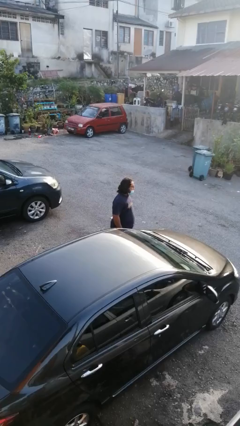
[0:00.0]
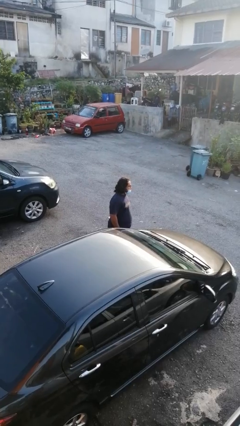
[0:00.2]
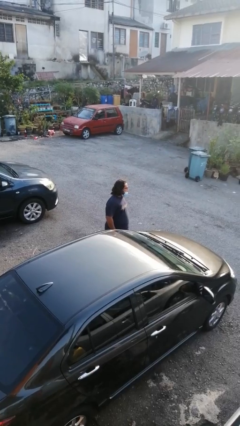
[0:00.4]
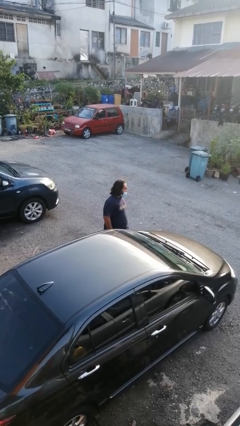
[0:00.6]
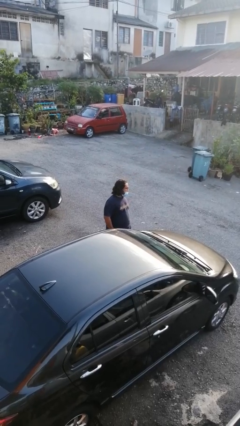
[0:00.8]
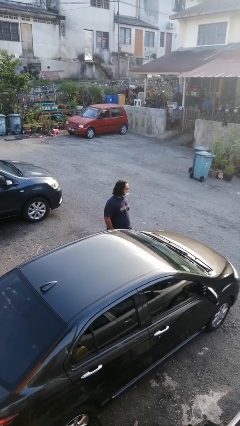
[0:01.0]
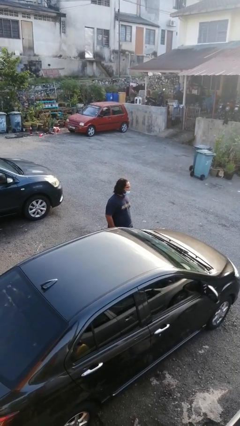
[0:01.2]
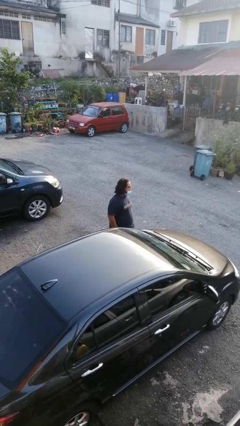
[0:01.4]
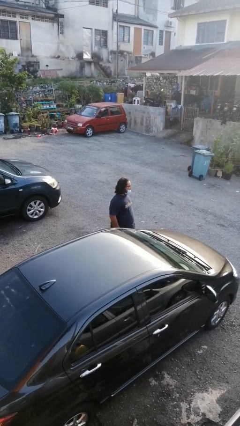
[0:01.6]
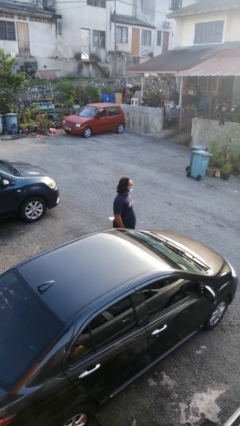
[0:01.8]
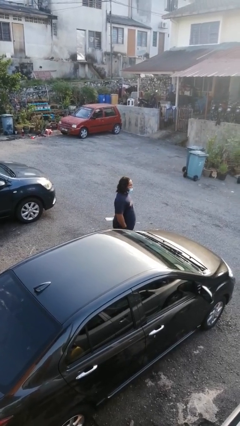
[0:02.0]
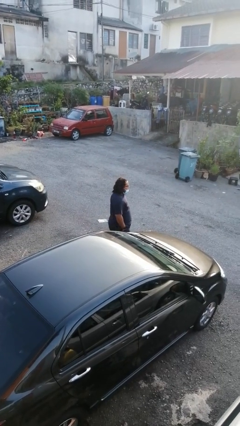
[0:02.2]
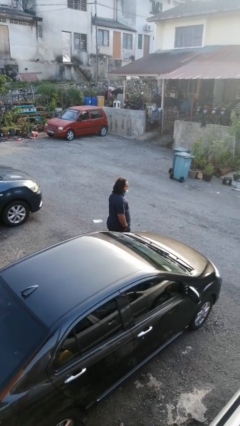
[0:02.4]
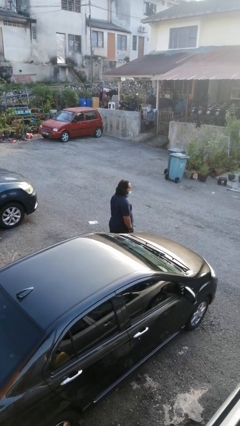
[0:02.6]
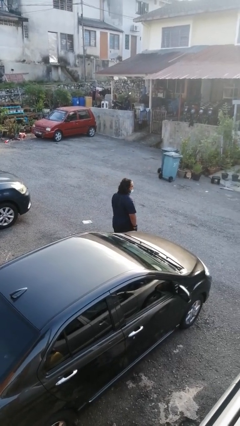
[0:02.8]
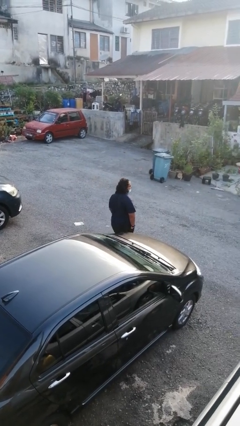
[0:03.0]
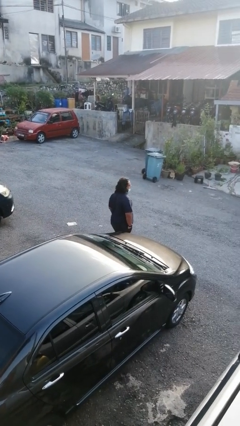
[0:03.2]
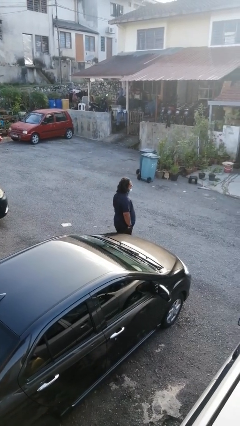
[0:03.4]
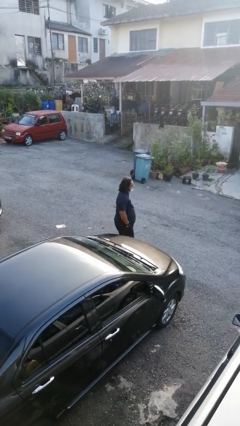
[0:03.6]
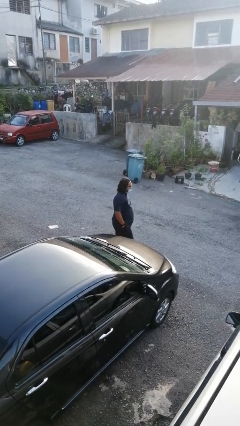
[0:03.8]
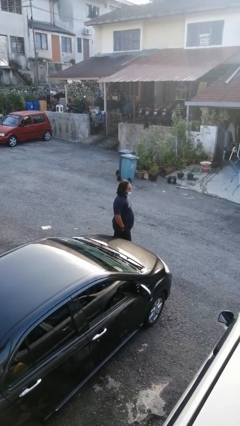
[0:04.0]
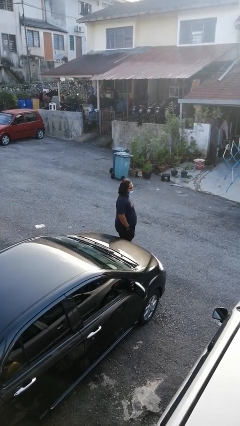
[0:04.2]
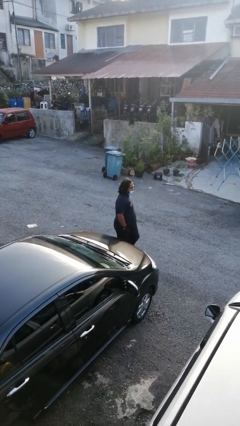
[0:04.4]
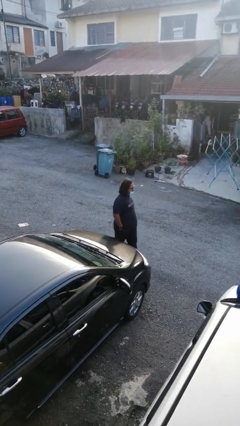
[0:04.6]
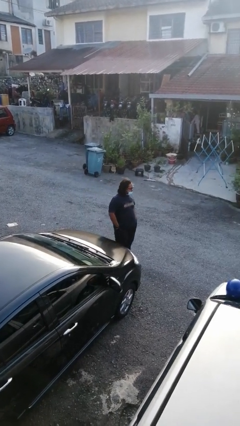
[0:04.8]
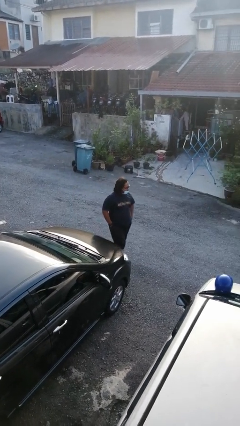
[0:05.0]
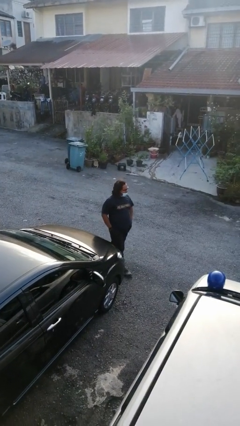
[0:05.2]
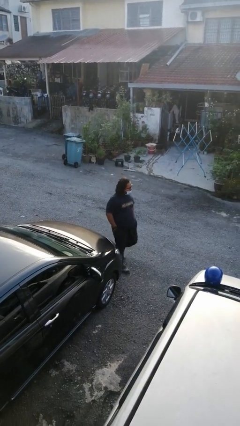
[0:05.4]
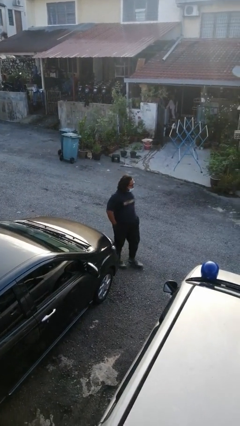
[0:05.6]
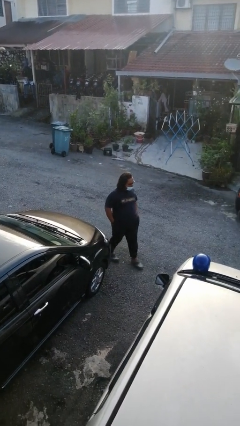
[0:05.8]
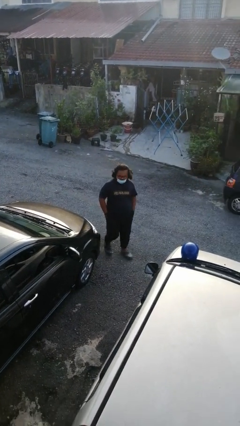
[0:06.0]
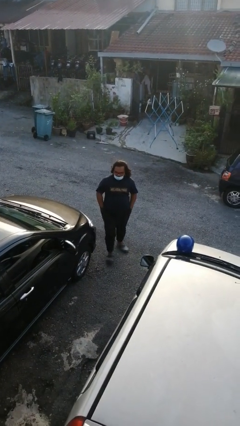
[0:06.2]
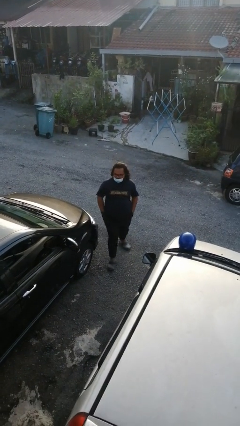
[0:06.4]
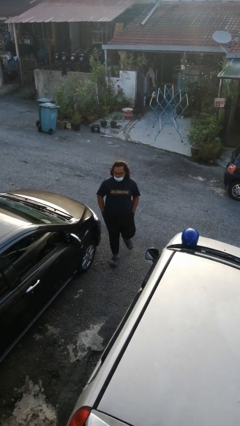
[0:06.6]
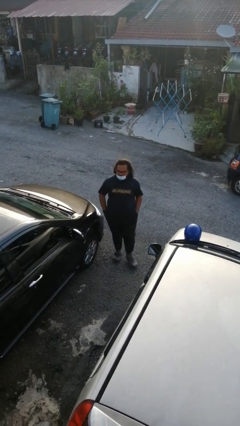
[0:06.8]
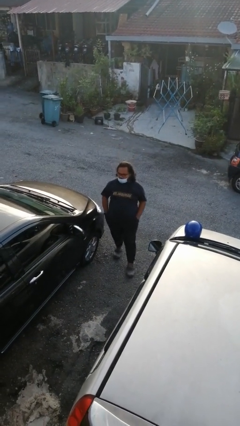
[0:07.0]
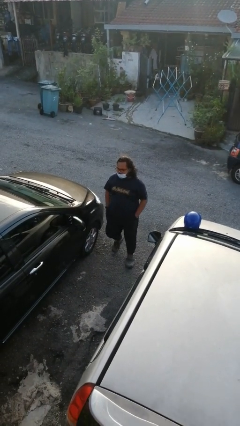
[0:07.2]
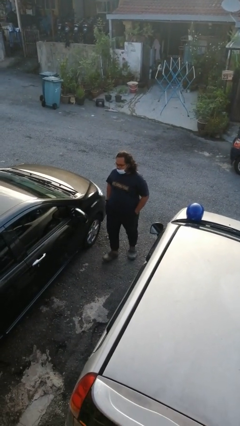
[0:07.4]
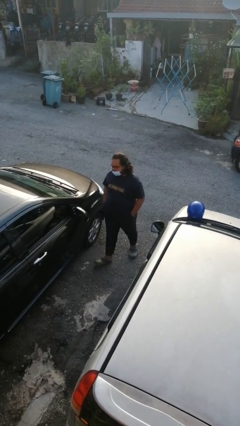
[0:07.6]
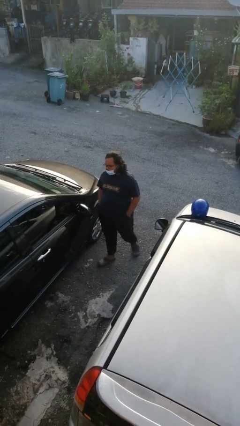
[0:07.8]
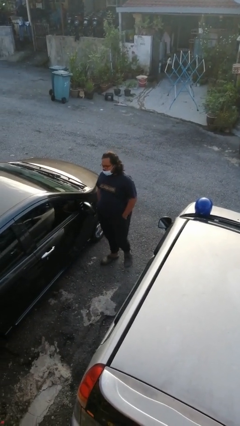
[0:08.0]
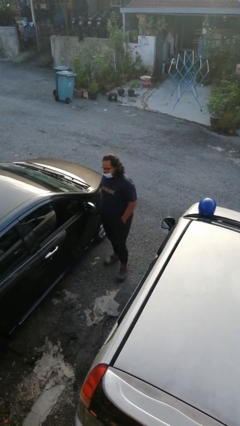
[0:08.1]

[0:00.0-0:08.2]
person walks around car

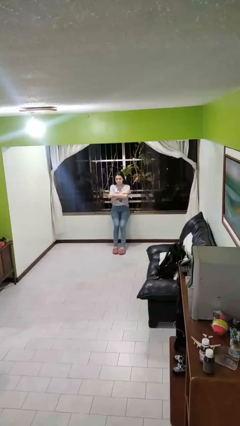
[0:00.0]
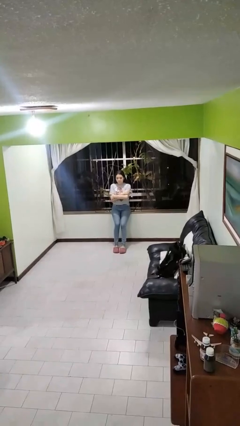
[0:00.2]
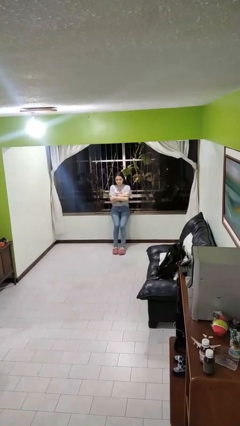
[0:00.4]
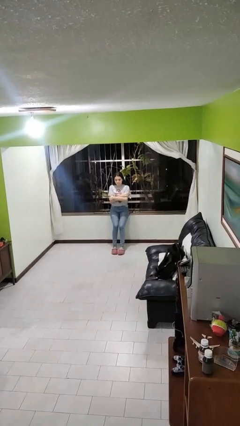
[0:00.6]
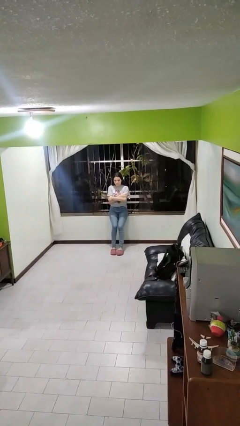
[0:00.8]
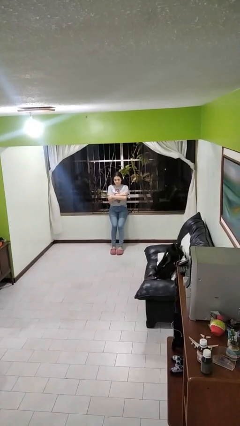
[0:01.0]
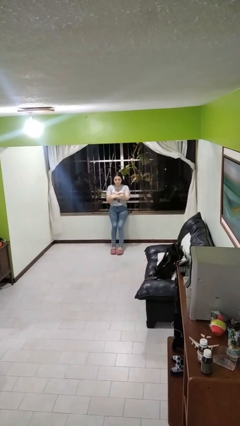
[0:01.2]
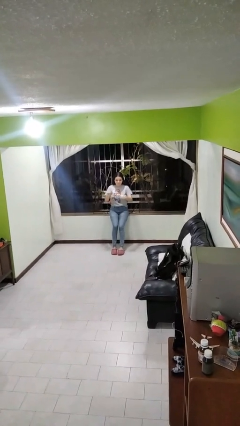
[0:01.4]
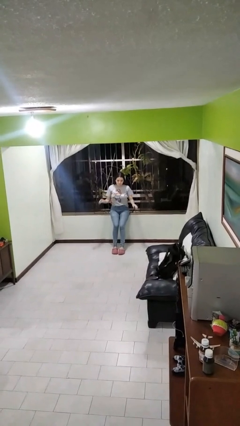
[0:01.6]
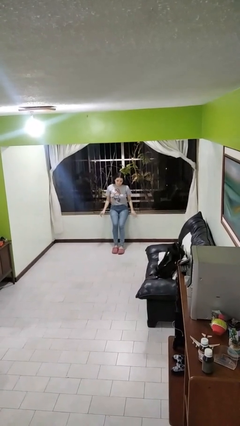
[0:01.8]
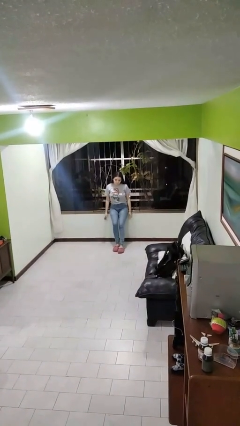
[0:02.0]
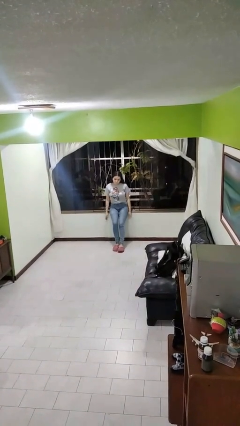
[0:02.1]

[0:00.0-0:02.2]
person crosses arms

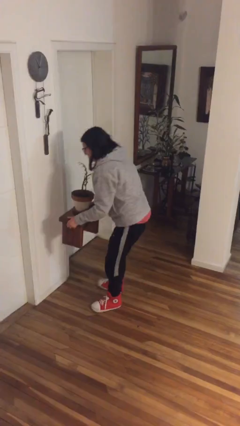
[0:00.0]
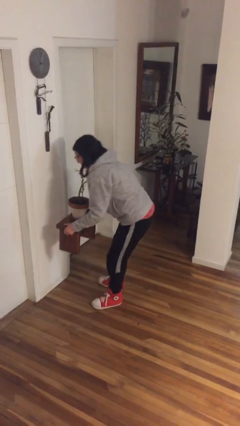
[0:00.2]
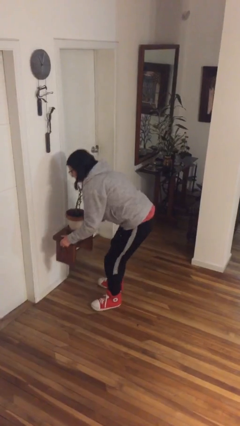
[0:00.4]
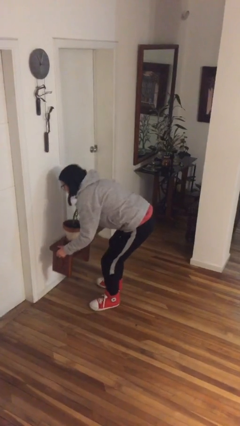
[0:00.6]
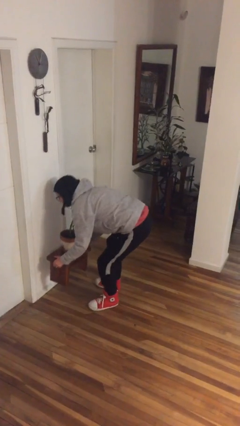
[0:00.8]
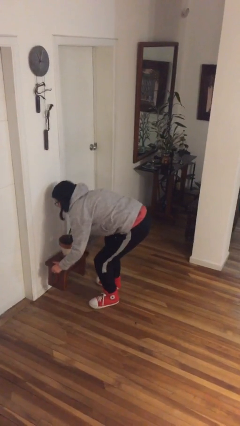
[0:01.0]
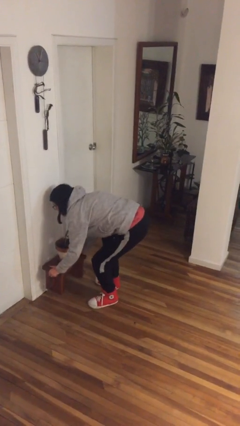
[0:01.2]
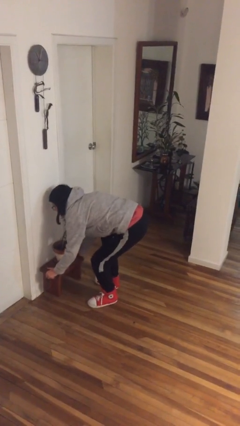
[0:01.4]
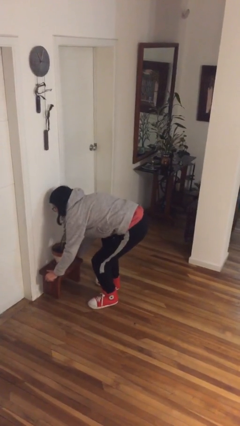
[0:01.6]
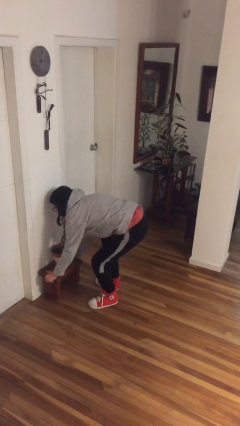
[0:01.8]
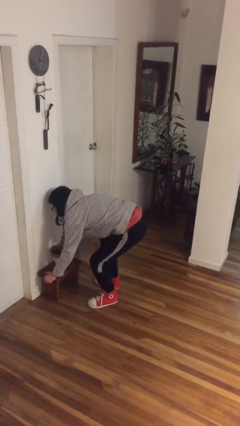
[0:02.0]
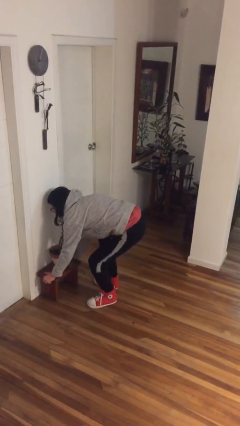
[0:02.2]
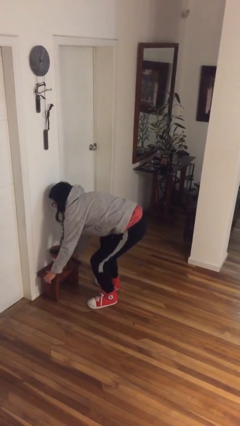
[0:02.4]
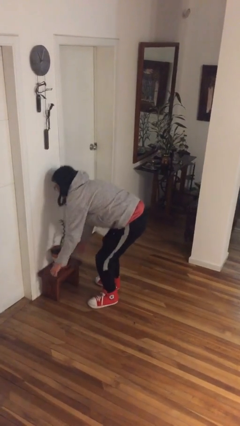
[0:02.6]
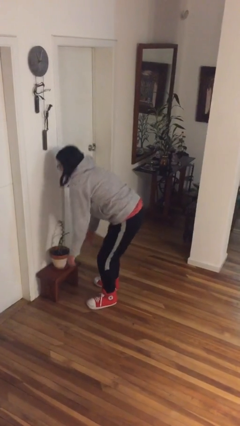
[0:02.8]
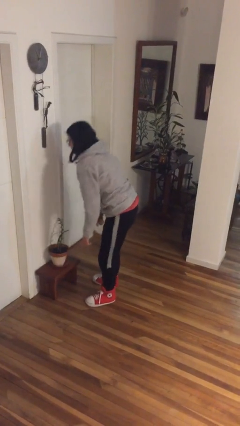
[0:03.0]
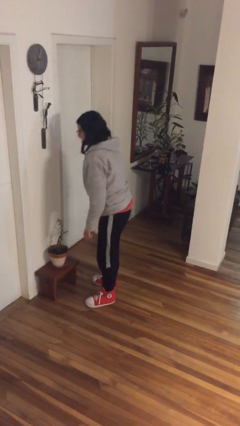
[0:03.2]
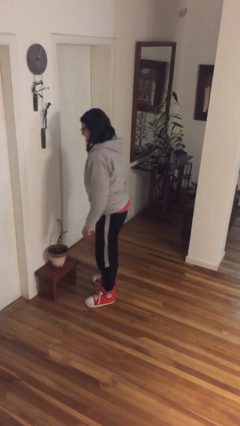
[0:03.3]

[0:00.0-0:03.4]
person puts down object on floor

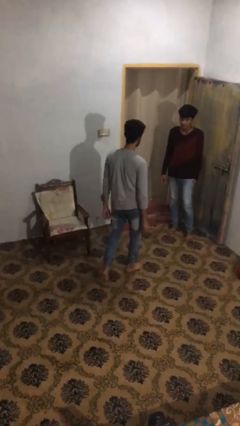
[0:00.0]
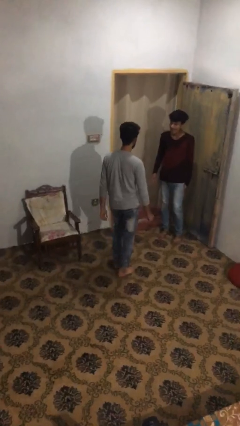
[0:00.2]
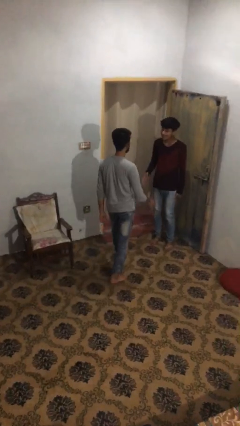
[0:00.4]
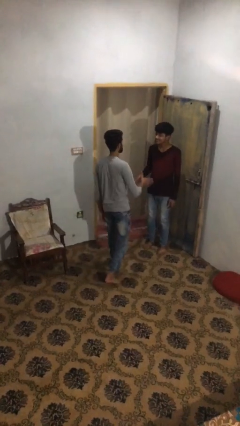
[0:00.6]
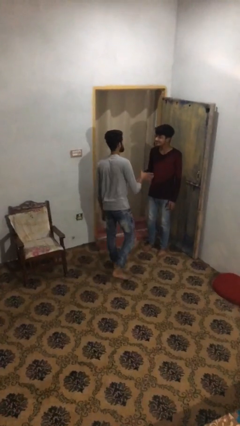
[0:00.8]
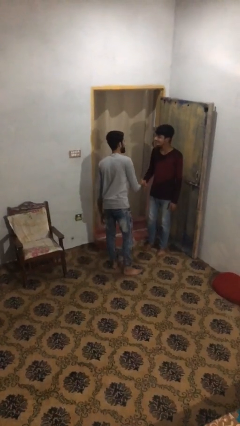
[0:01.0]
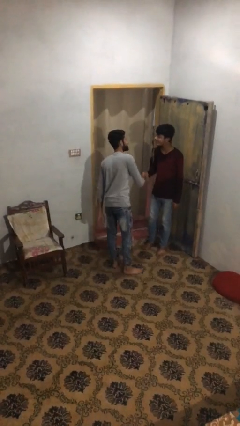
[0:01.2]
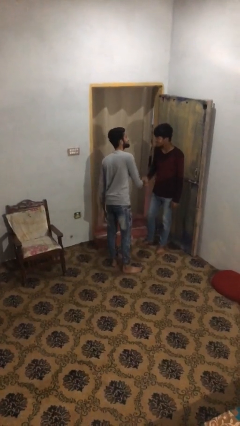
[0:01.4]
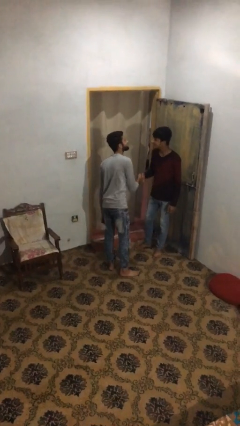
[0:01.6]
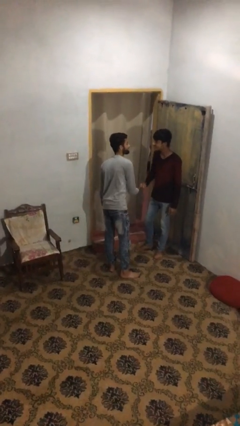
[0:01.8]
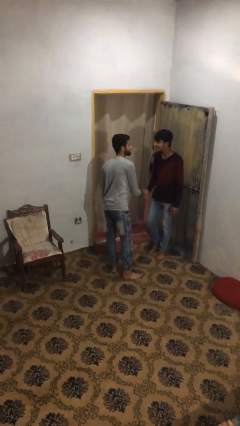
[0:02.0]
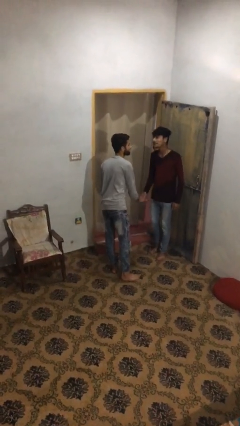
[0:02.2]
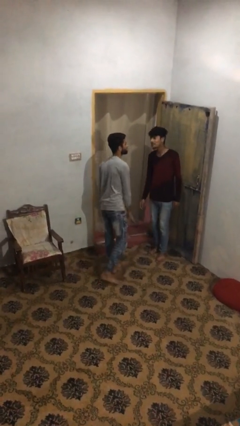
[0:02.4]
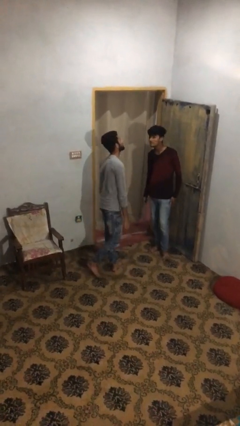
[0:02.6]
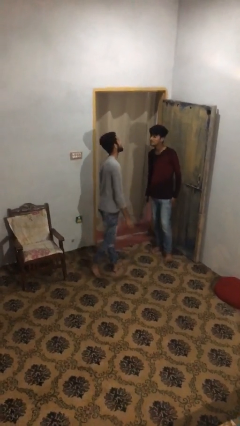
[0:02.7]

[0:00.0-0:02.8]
person shakes hand

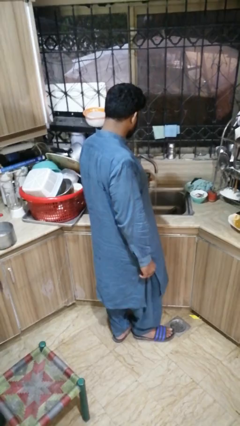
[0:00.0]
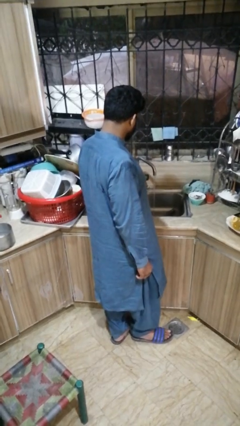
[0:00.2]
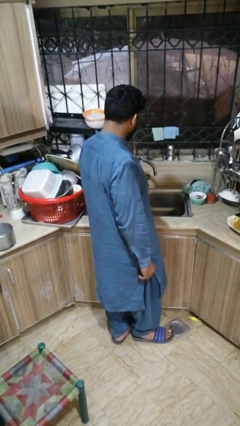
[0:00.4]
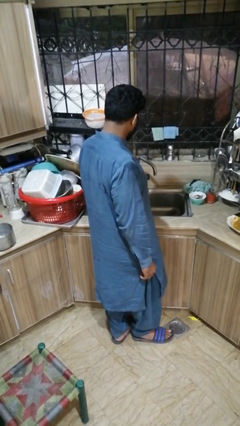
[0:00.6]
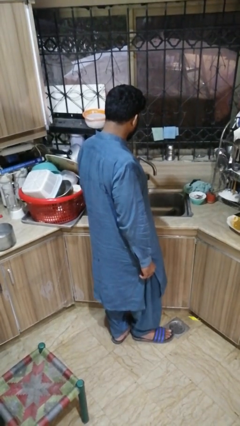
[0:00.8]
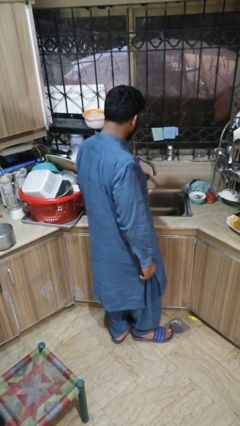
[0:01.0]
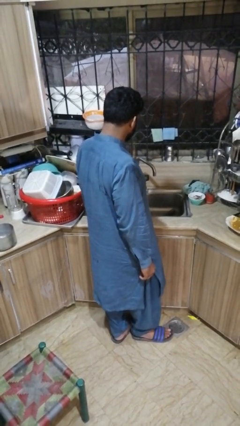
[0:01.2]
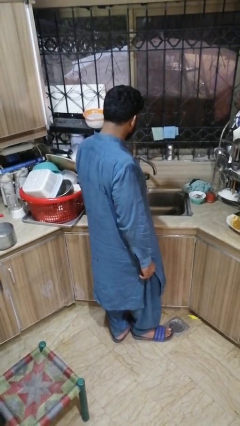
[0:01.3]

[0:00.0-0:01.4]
person turns off faucet
